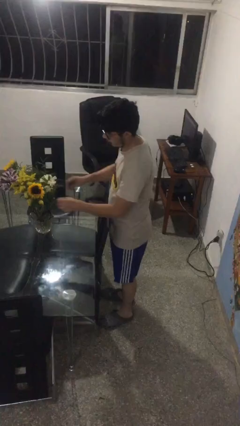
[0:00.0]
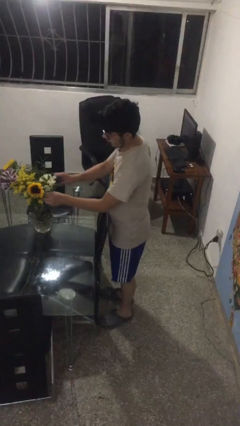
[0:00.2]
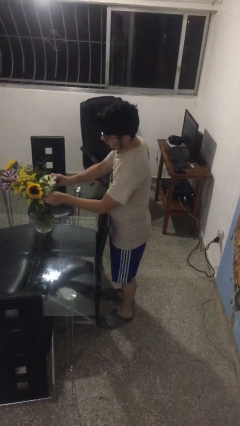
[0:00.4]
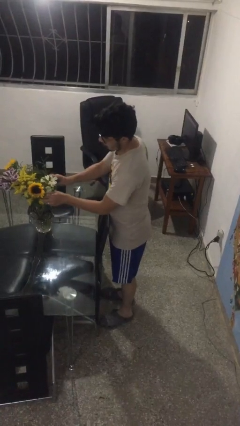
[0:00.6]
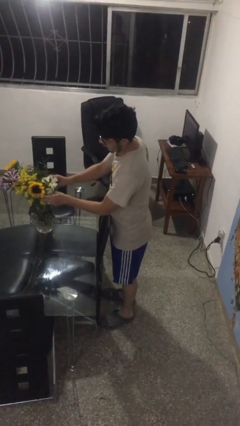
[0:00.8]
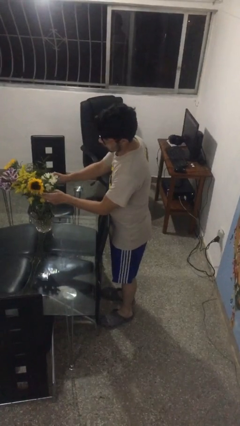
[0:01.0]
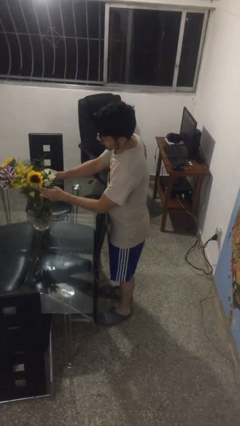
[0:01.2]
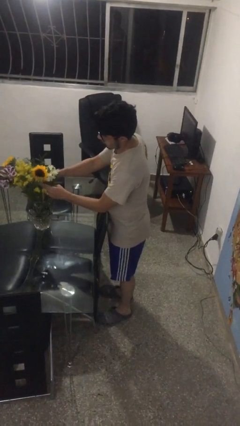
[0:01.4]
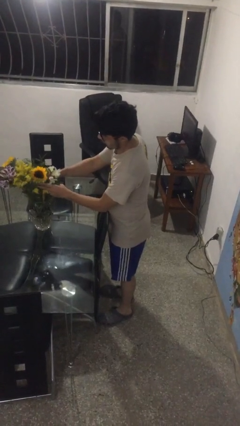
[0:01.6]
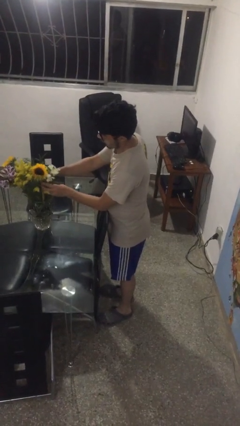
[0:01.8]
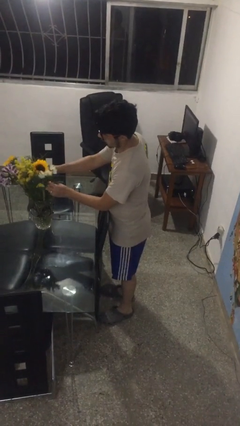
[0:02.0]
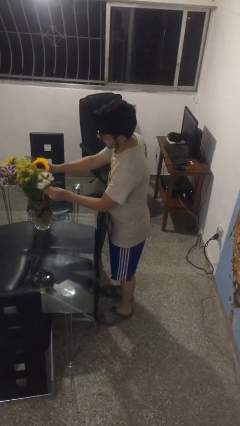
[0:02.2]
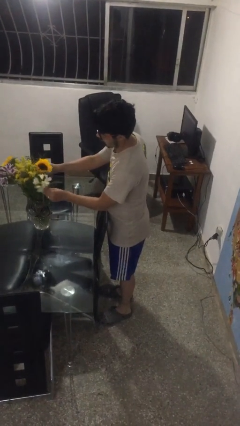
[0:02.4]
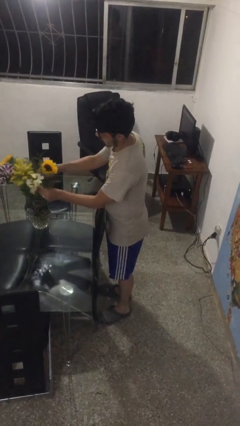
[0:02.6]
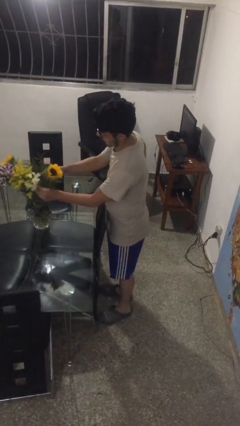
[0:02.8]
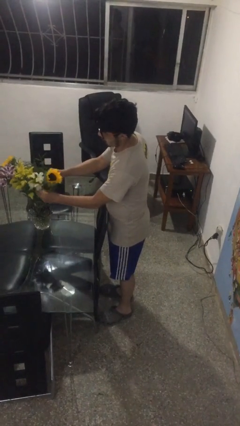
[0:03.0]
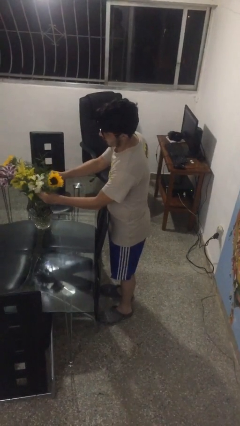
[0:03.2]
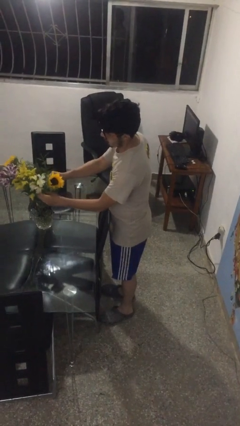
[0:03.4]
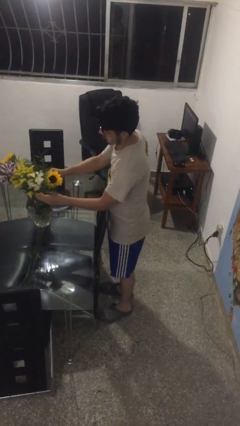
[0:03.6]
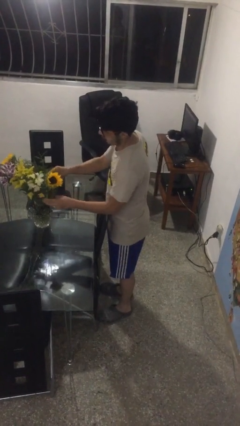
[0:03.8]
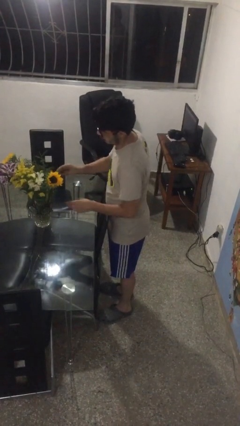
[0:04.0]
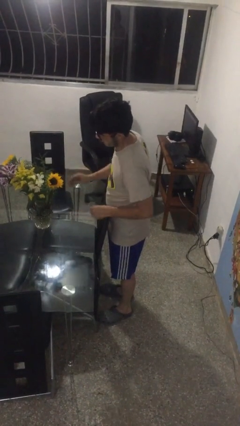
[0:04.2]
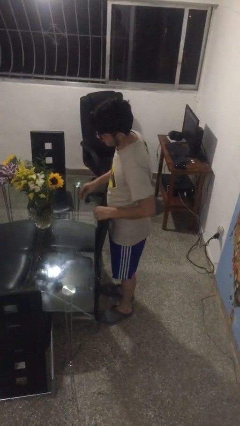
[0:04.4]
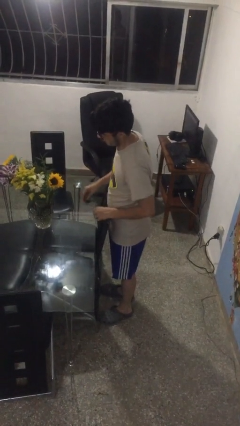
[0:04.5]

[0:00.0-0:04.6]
person arranges flowers in vase

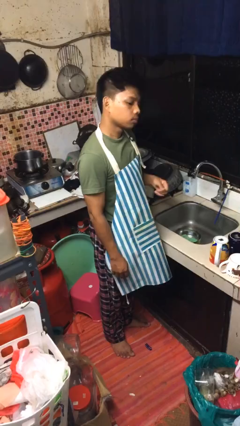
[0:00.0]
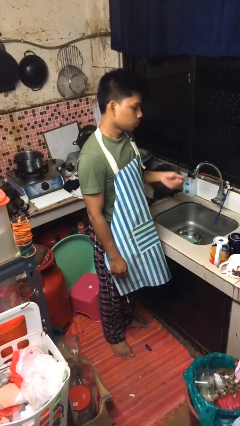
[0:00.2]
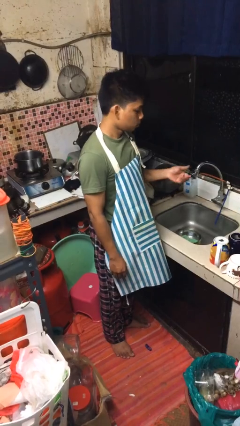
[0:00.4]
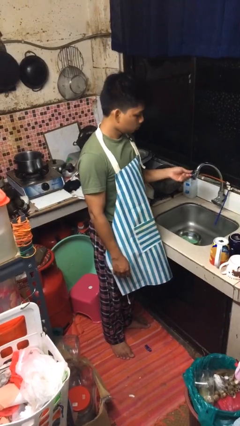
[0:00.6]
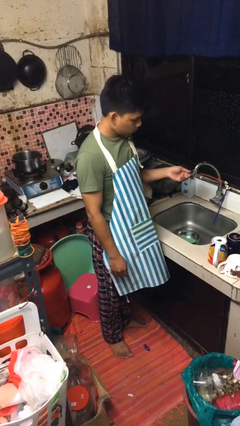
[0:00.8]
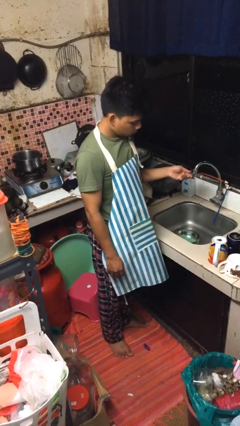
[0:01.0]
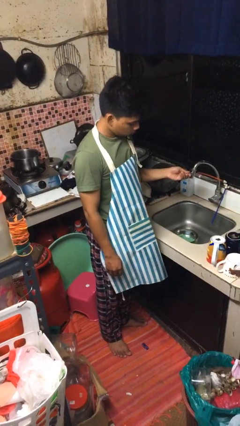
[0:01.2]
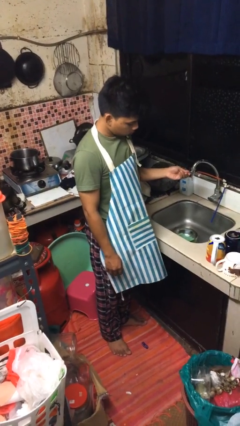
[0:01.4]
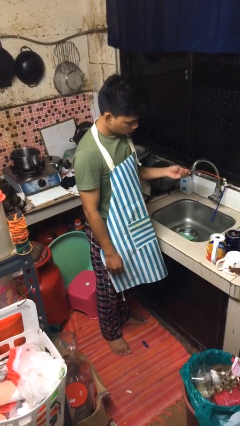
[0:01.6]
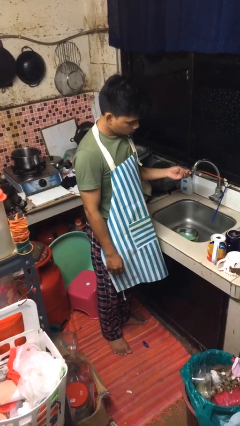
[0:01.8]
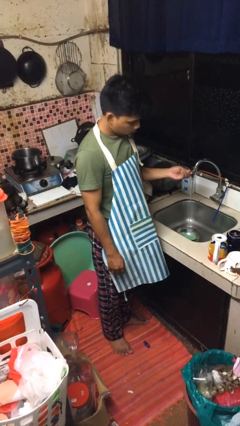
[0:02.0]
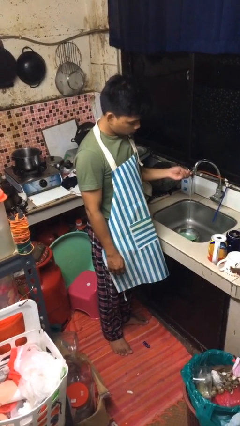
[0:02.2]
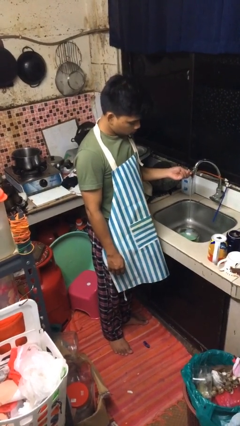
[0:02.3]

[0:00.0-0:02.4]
person turns on faucet

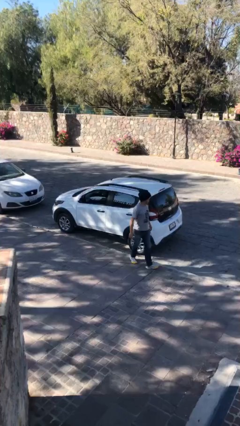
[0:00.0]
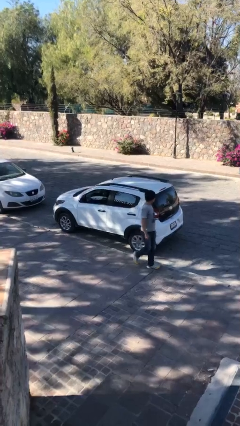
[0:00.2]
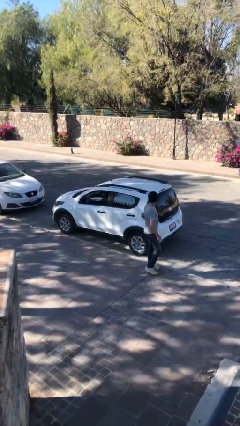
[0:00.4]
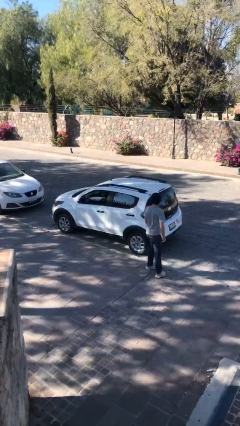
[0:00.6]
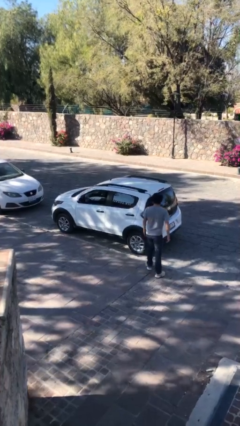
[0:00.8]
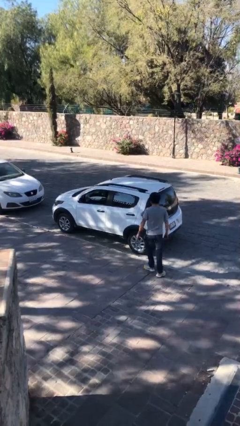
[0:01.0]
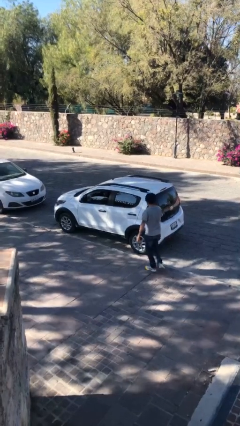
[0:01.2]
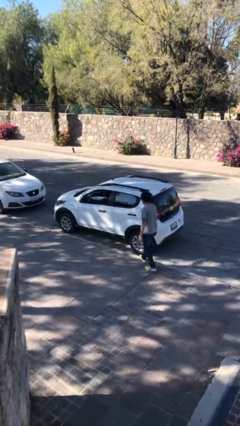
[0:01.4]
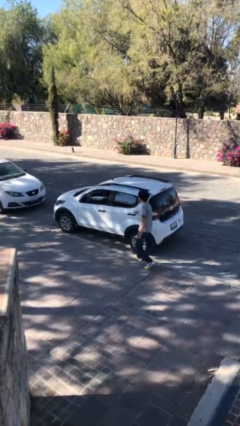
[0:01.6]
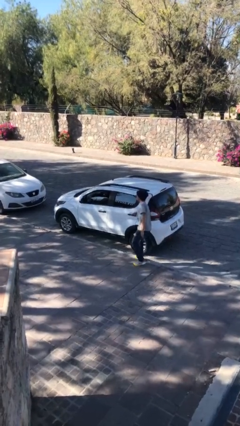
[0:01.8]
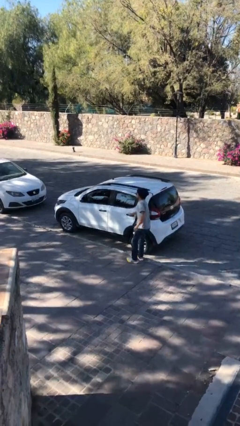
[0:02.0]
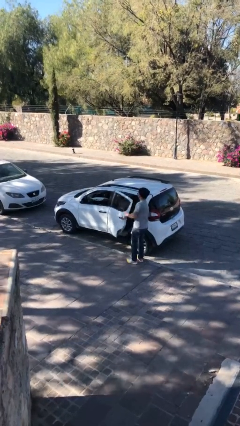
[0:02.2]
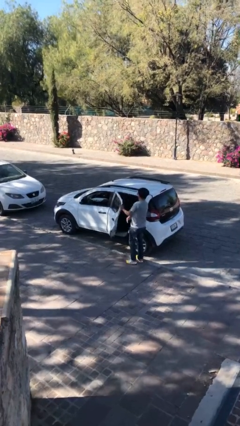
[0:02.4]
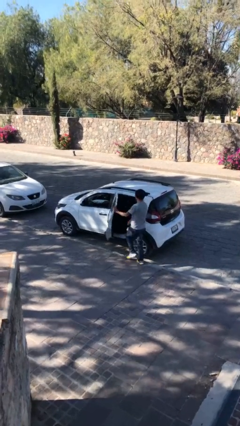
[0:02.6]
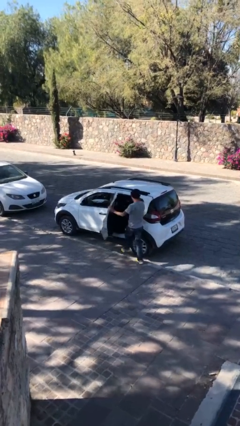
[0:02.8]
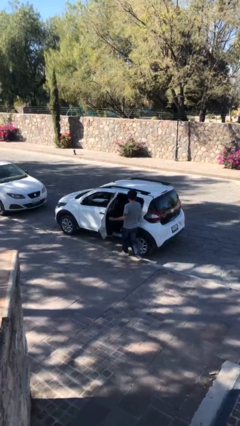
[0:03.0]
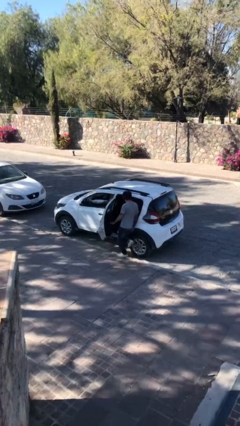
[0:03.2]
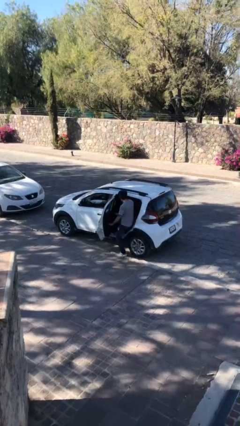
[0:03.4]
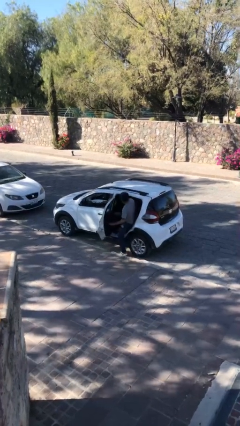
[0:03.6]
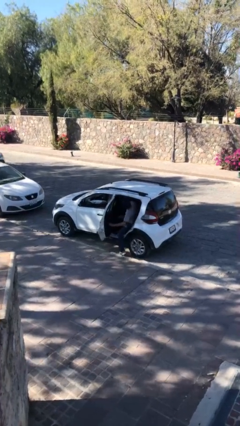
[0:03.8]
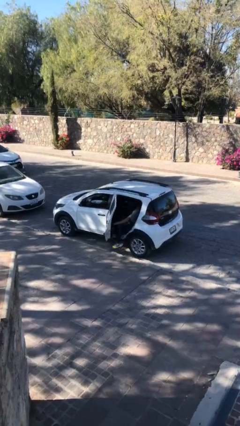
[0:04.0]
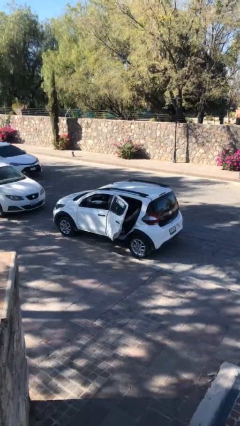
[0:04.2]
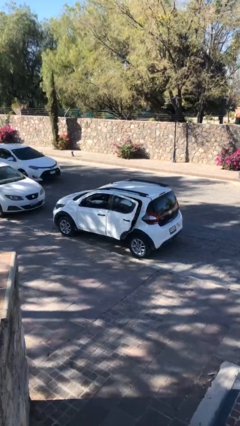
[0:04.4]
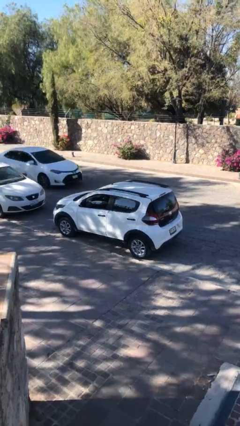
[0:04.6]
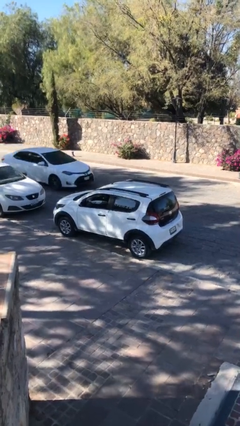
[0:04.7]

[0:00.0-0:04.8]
car picks up person

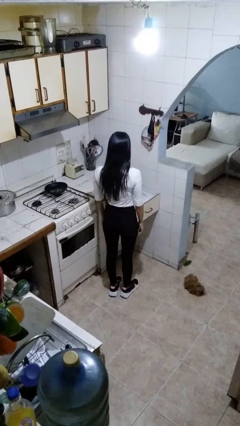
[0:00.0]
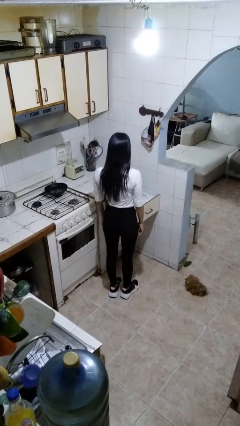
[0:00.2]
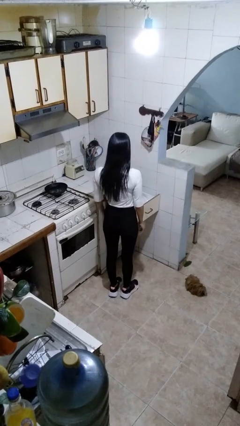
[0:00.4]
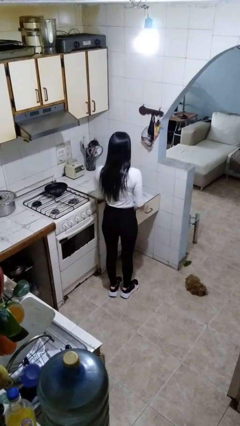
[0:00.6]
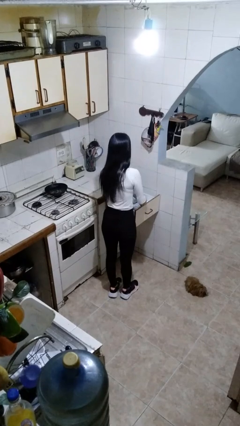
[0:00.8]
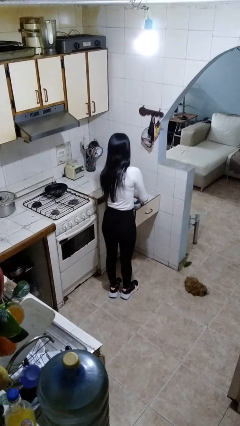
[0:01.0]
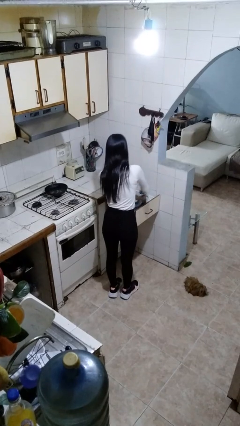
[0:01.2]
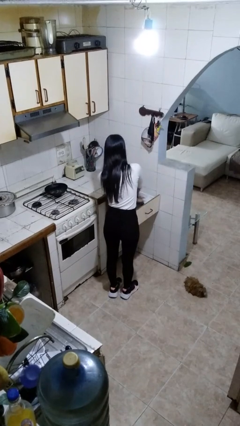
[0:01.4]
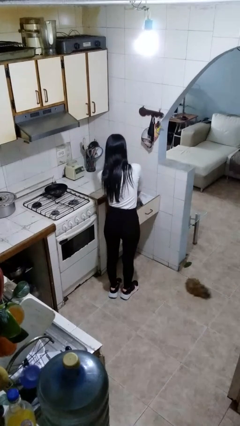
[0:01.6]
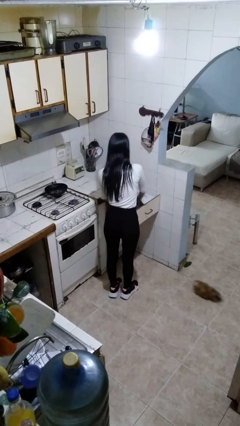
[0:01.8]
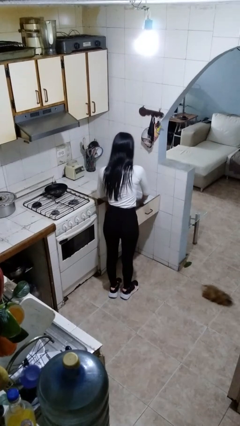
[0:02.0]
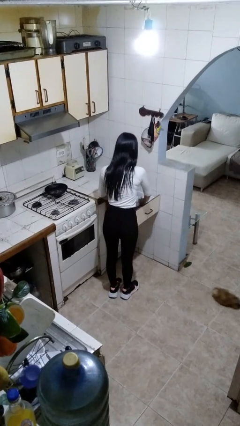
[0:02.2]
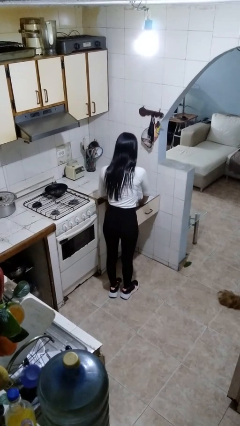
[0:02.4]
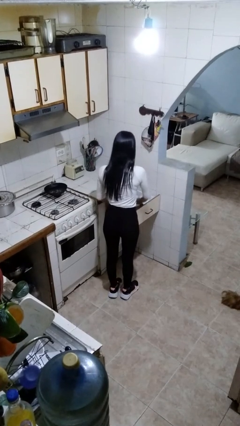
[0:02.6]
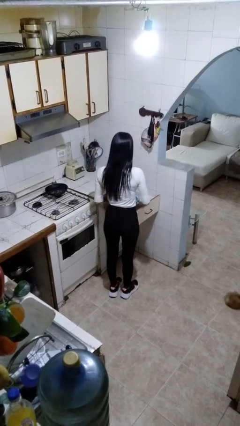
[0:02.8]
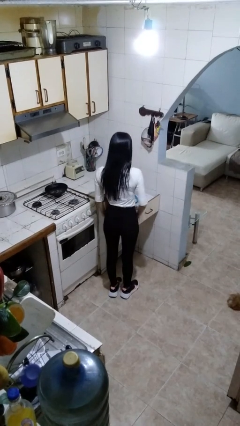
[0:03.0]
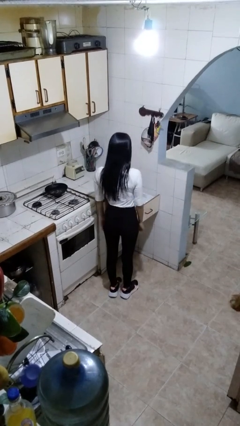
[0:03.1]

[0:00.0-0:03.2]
person searches in kitchen drawer

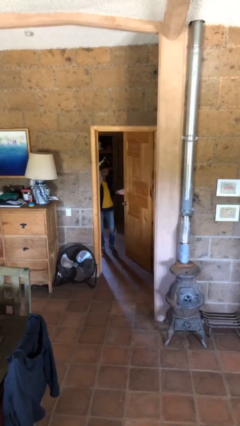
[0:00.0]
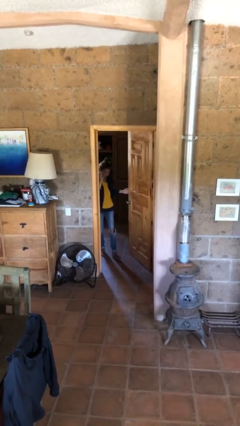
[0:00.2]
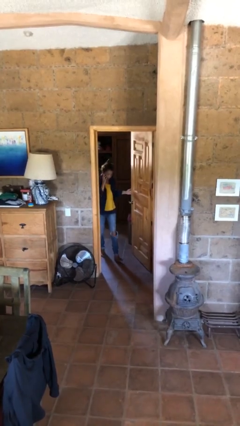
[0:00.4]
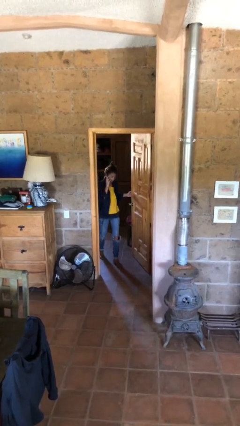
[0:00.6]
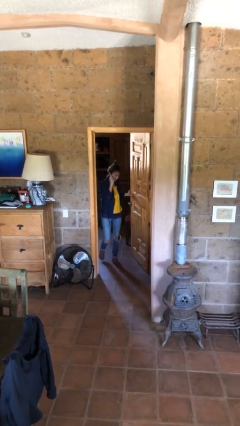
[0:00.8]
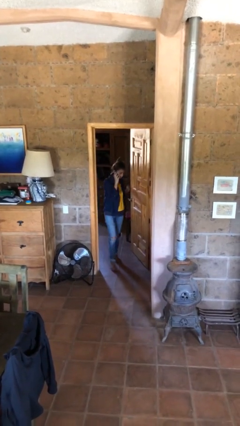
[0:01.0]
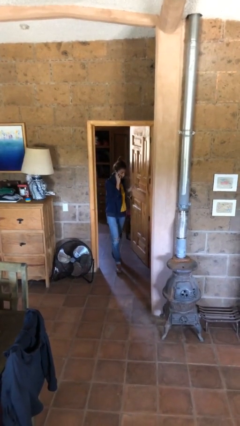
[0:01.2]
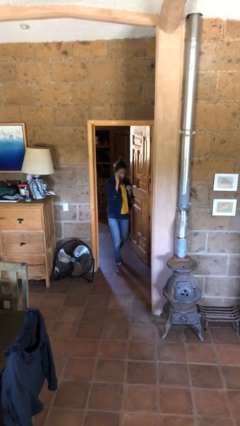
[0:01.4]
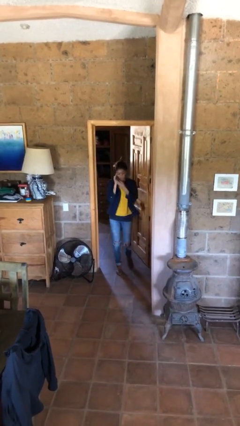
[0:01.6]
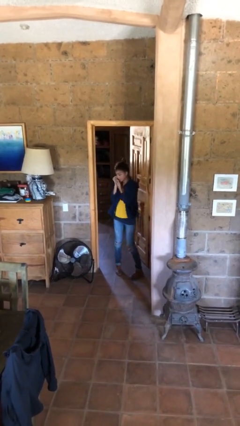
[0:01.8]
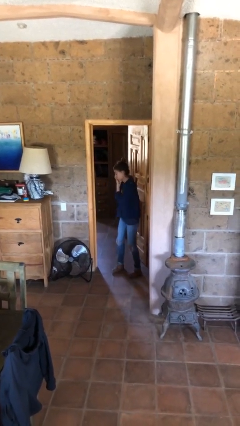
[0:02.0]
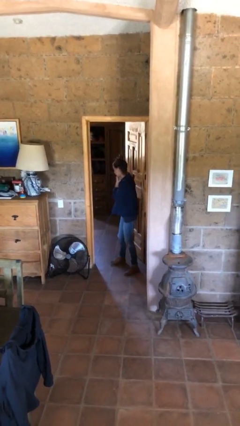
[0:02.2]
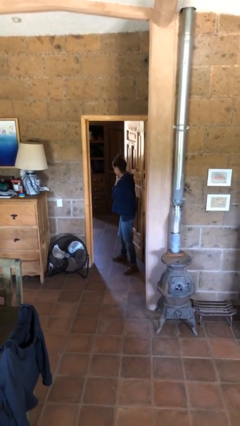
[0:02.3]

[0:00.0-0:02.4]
person enters scene through structure
